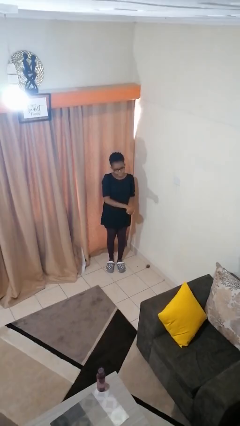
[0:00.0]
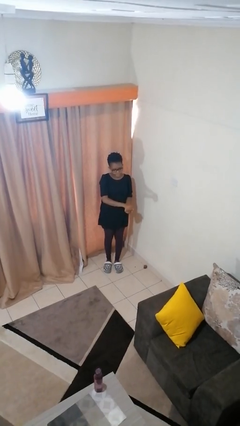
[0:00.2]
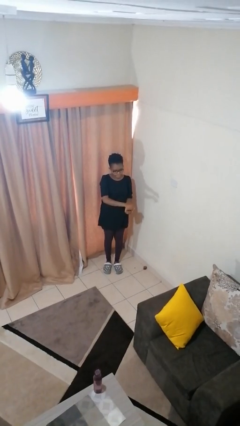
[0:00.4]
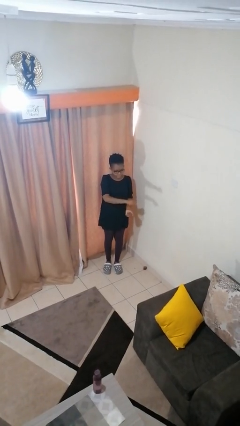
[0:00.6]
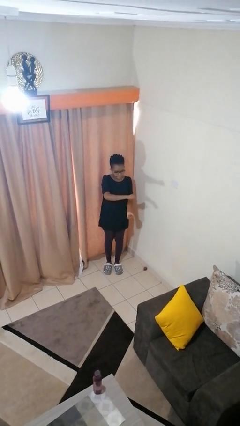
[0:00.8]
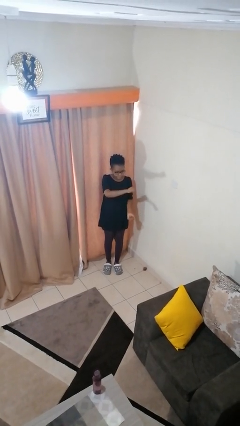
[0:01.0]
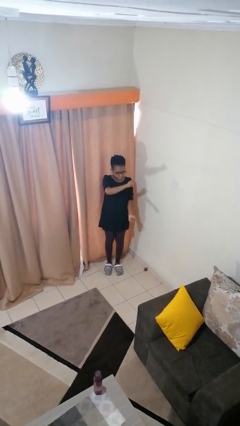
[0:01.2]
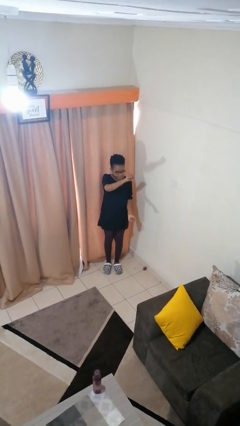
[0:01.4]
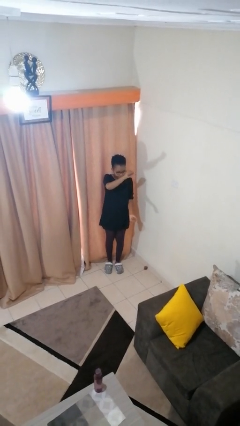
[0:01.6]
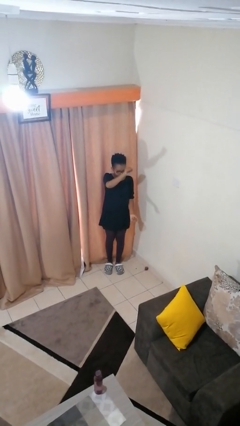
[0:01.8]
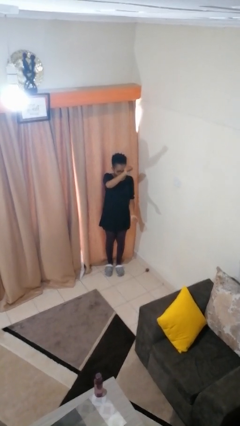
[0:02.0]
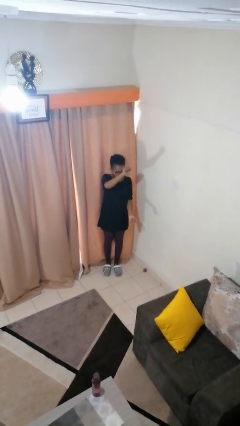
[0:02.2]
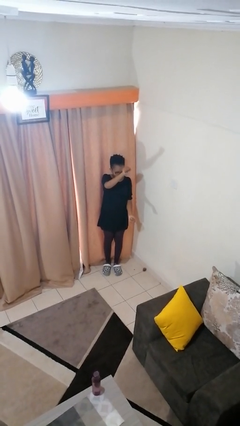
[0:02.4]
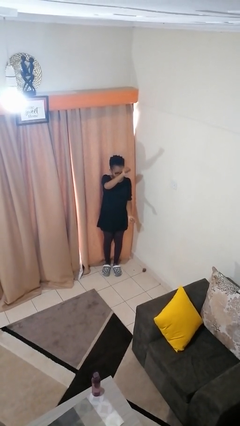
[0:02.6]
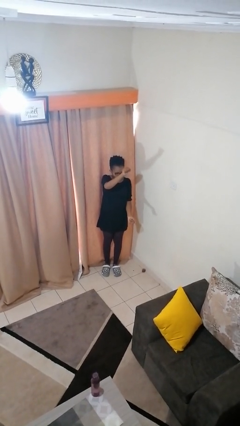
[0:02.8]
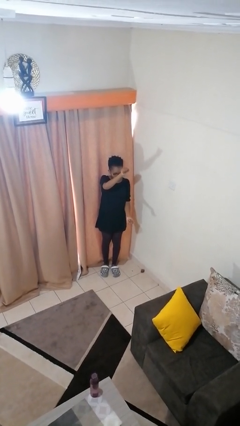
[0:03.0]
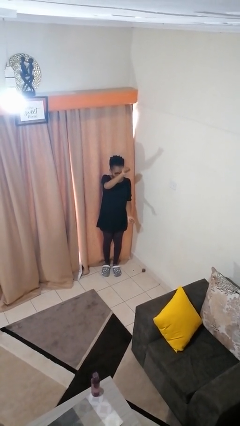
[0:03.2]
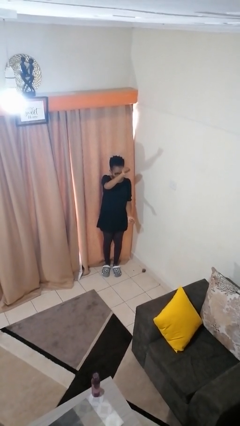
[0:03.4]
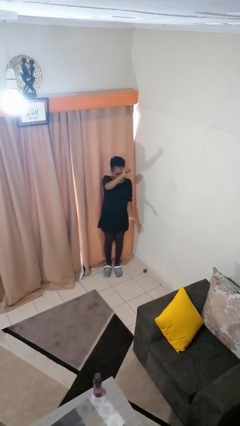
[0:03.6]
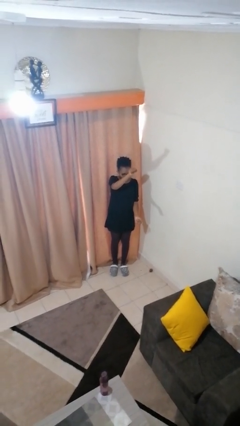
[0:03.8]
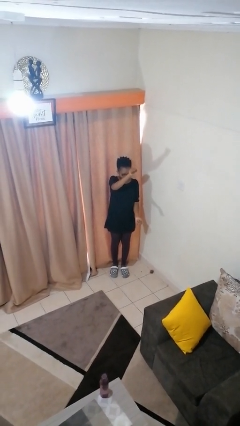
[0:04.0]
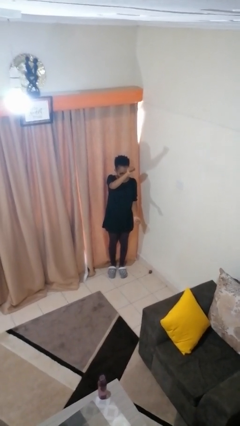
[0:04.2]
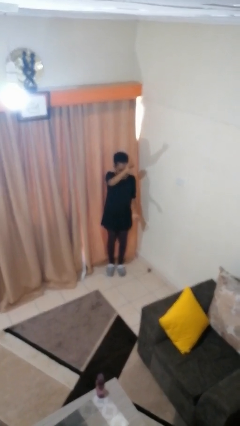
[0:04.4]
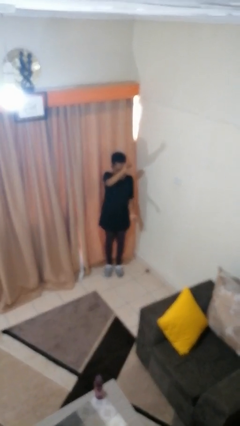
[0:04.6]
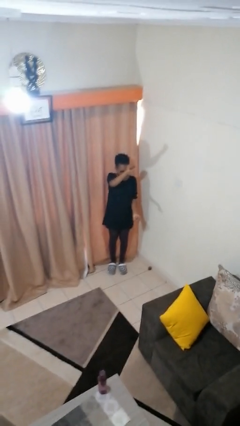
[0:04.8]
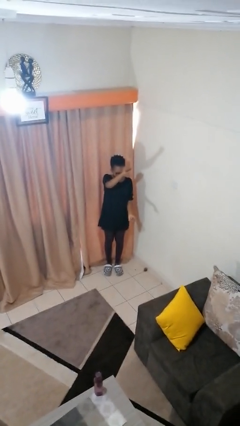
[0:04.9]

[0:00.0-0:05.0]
person gestures zoom in

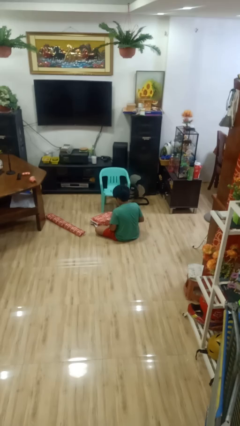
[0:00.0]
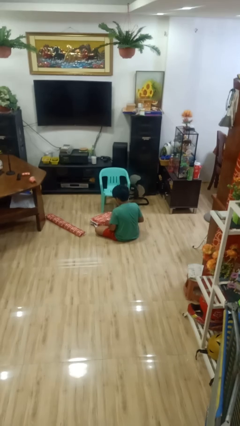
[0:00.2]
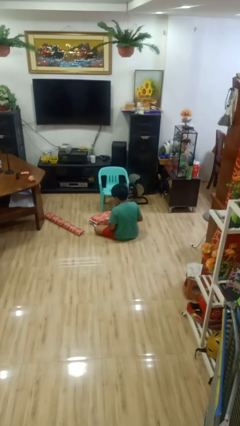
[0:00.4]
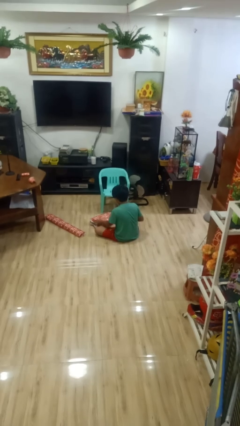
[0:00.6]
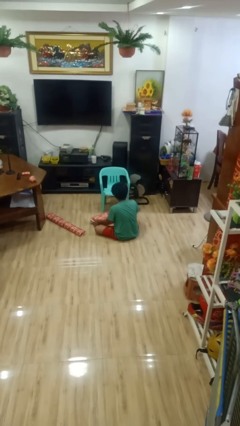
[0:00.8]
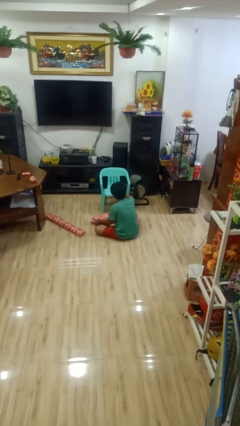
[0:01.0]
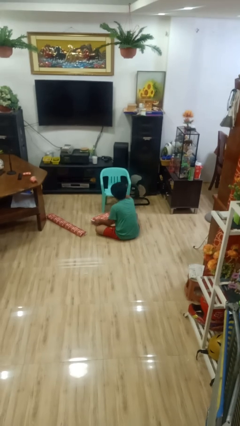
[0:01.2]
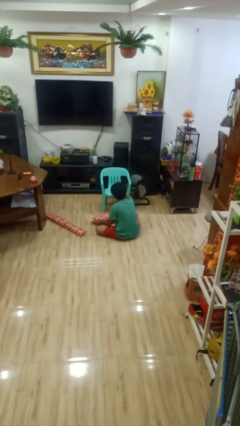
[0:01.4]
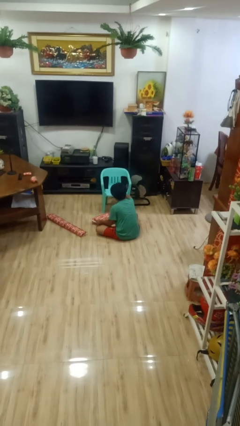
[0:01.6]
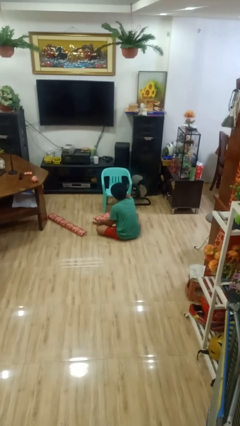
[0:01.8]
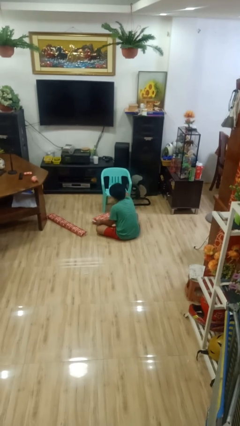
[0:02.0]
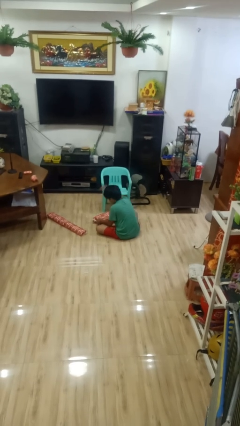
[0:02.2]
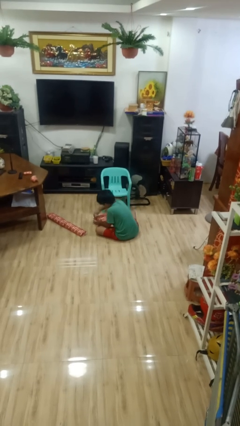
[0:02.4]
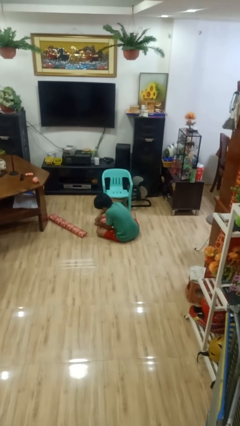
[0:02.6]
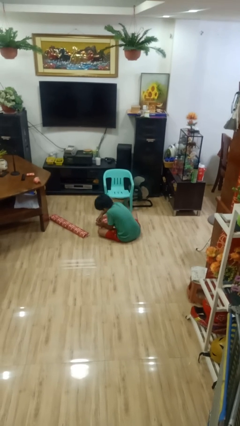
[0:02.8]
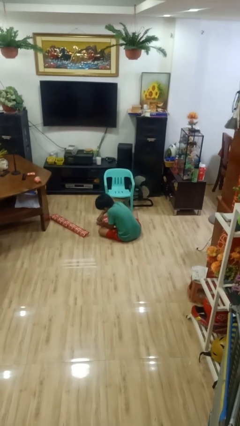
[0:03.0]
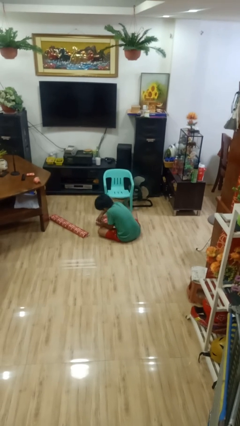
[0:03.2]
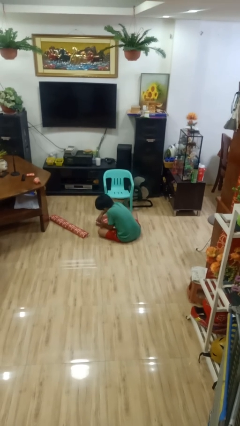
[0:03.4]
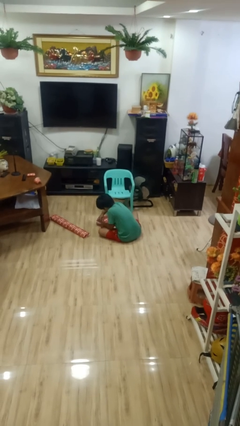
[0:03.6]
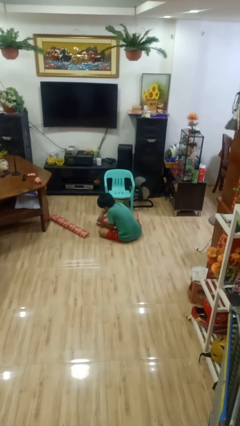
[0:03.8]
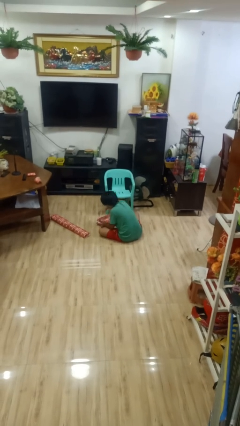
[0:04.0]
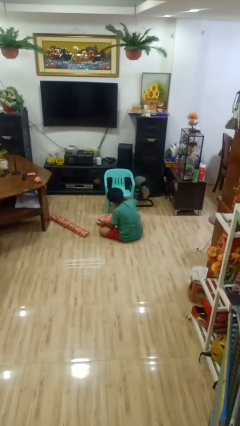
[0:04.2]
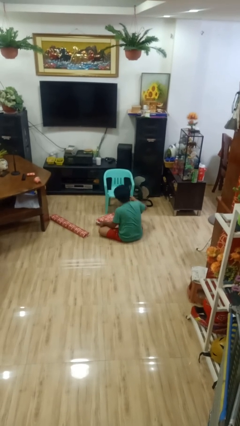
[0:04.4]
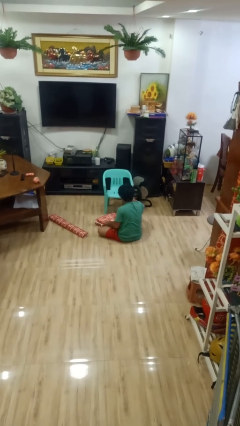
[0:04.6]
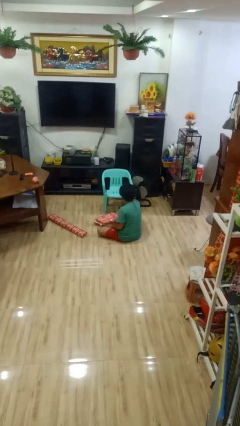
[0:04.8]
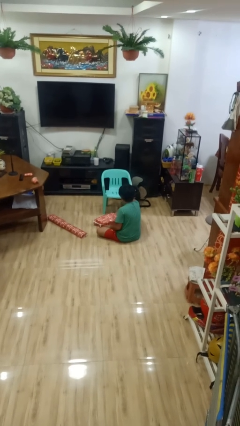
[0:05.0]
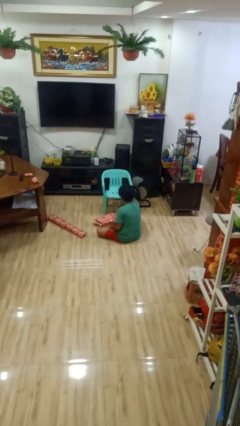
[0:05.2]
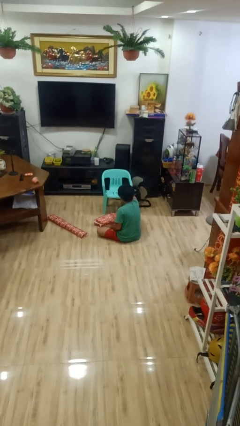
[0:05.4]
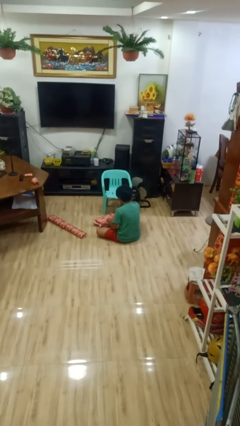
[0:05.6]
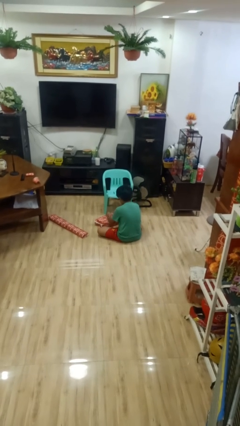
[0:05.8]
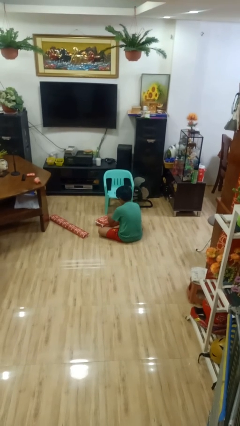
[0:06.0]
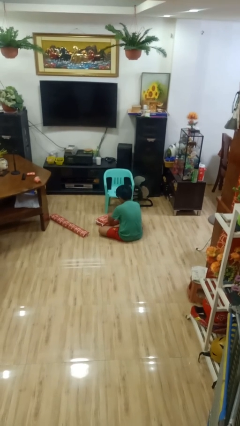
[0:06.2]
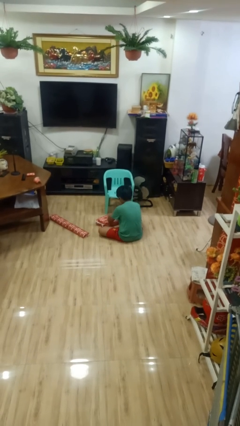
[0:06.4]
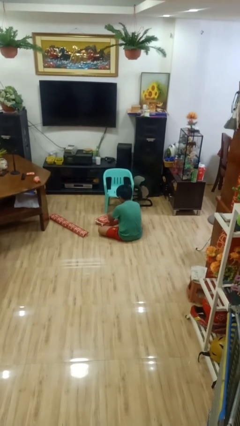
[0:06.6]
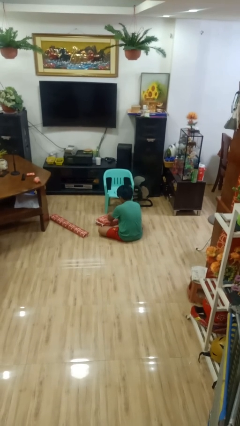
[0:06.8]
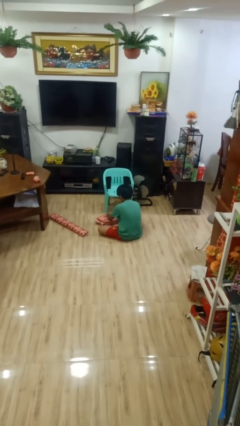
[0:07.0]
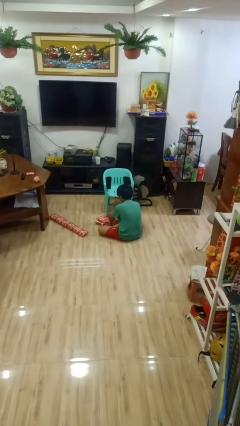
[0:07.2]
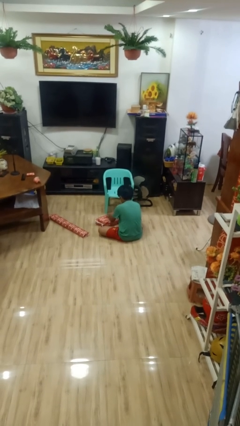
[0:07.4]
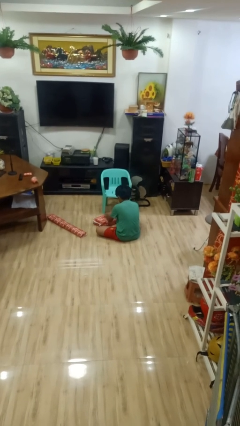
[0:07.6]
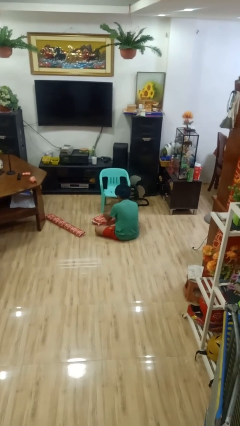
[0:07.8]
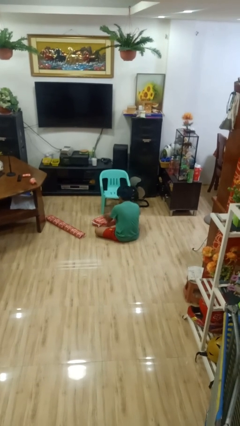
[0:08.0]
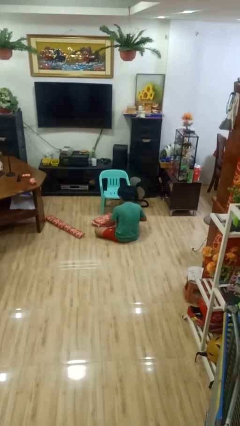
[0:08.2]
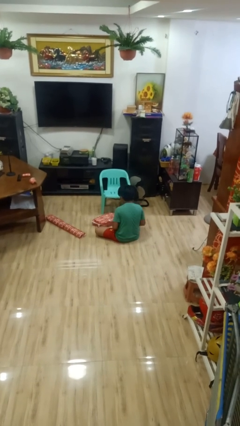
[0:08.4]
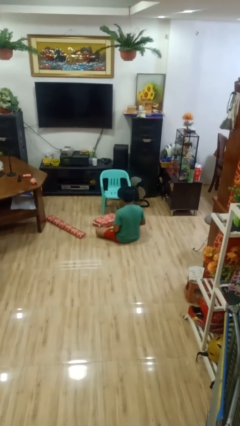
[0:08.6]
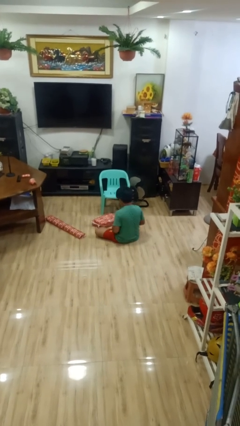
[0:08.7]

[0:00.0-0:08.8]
person wraps box

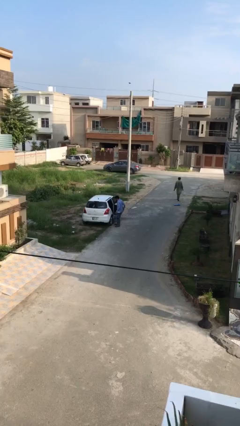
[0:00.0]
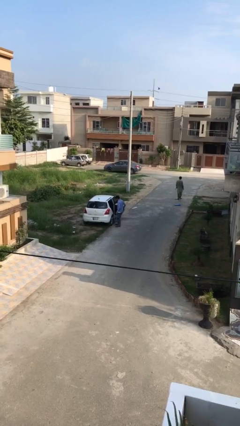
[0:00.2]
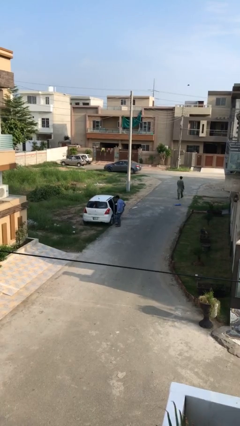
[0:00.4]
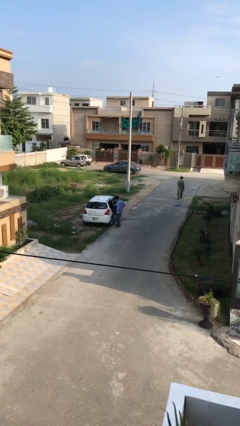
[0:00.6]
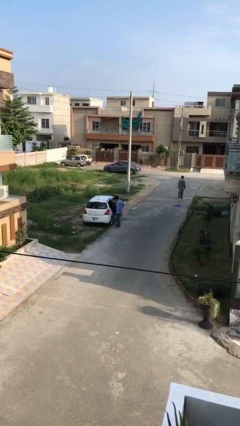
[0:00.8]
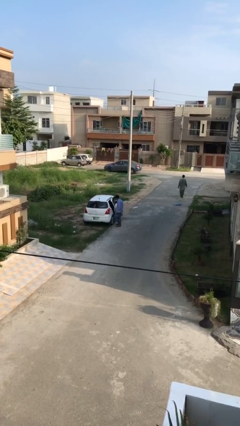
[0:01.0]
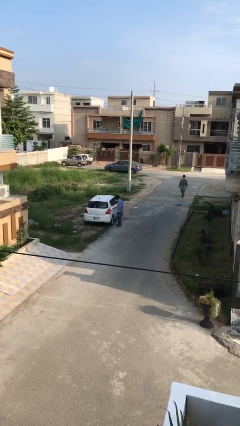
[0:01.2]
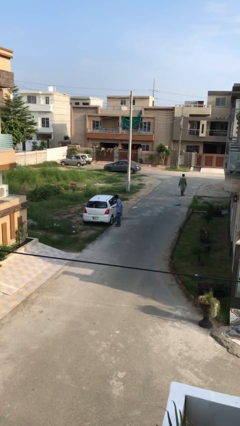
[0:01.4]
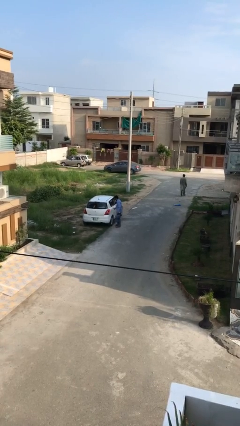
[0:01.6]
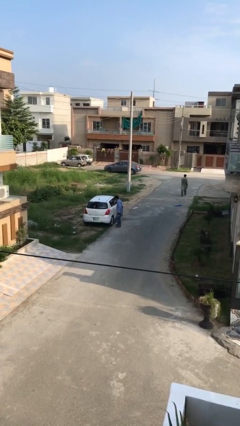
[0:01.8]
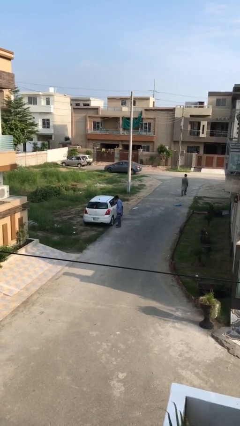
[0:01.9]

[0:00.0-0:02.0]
person closes car door

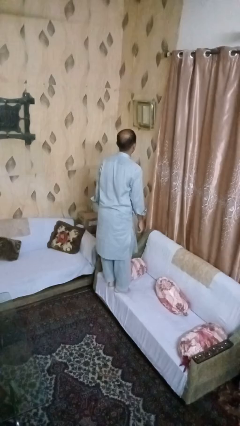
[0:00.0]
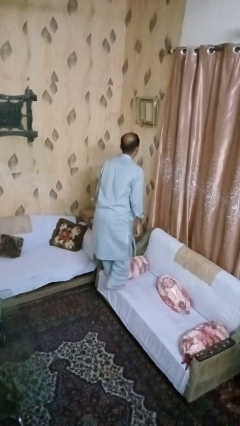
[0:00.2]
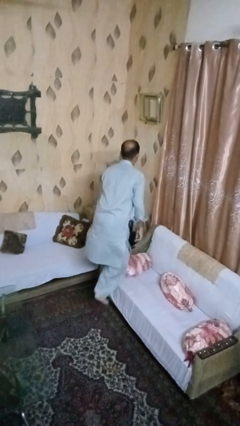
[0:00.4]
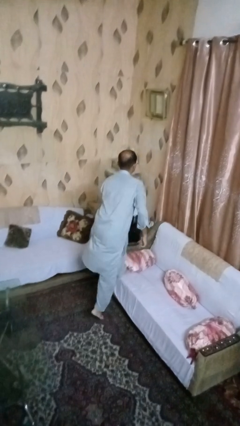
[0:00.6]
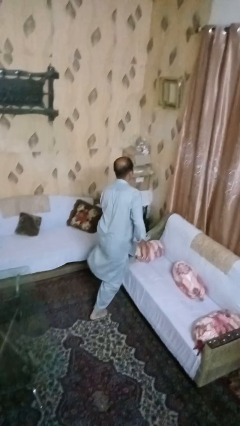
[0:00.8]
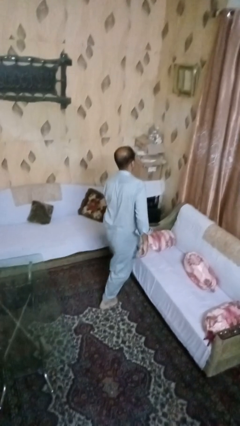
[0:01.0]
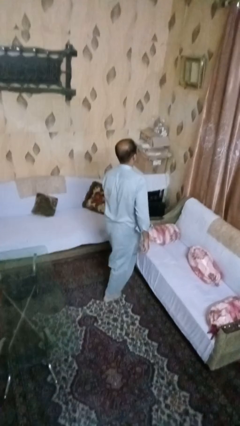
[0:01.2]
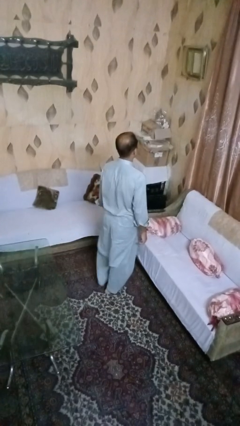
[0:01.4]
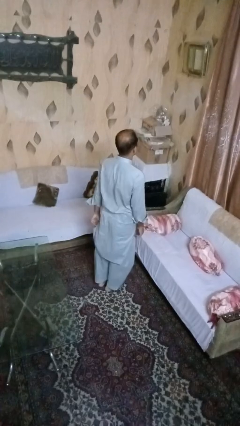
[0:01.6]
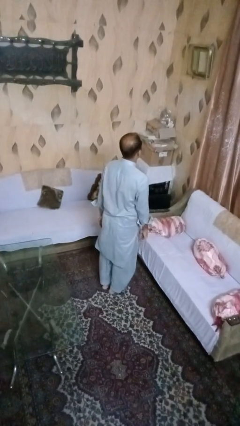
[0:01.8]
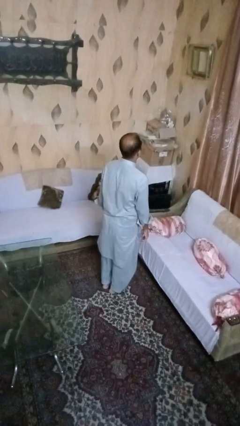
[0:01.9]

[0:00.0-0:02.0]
person climbs off couch
